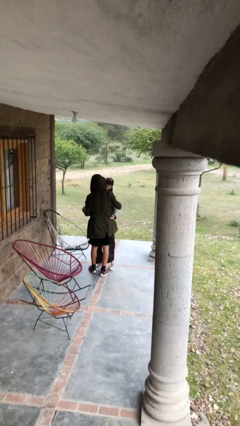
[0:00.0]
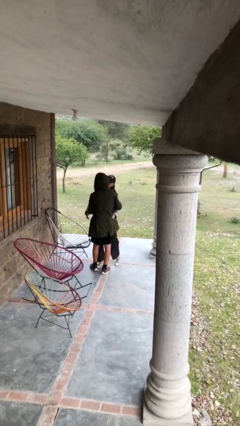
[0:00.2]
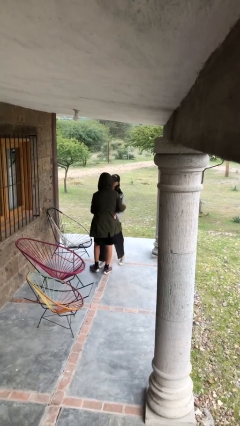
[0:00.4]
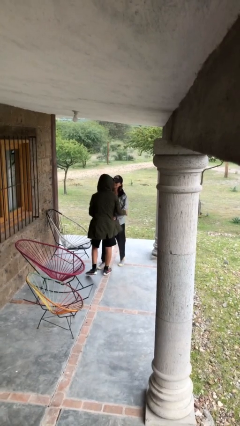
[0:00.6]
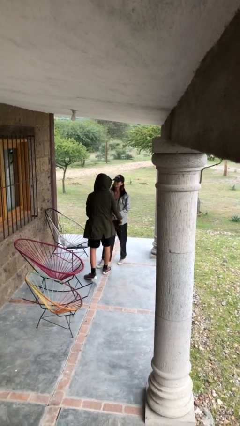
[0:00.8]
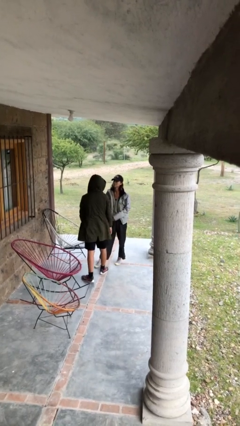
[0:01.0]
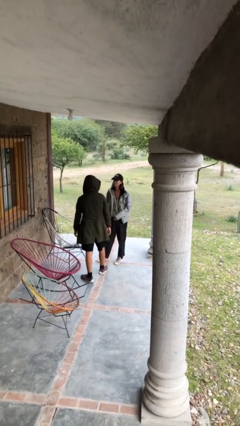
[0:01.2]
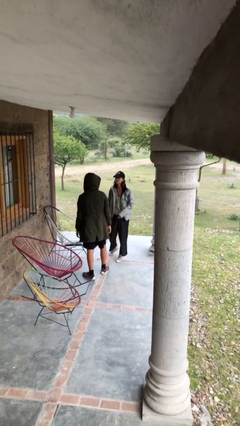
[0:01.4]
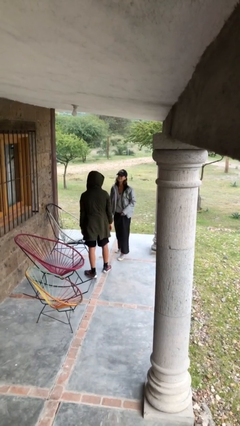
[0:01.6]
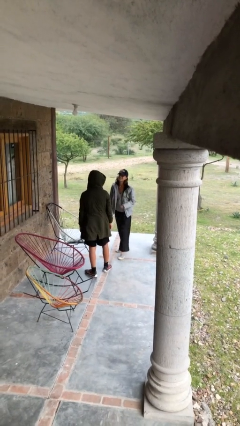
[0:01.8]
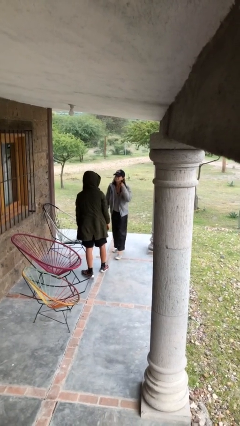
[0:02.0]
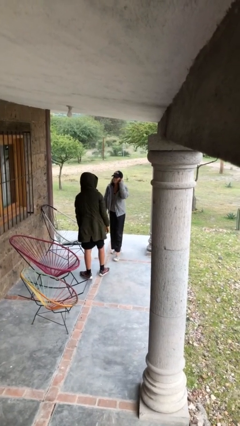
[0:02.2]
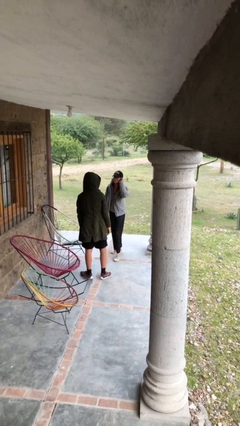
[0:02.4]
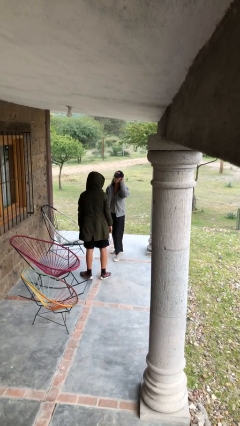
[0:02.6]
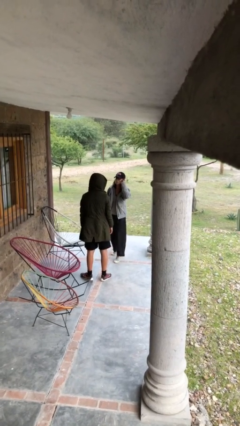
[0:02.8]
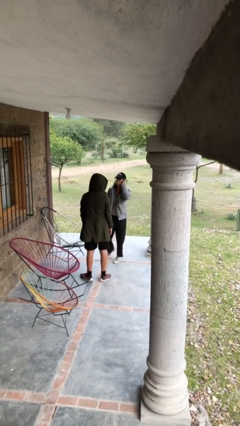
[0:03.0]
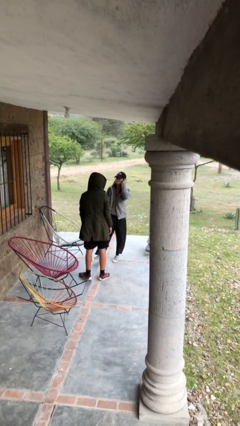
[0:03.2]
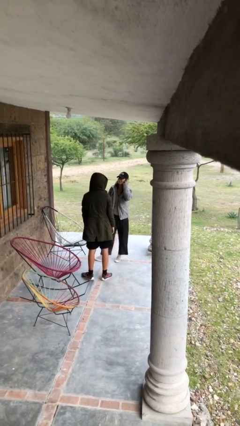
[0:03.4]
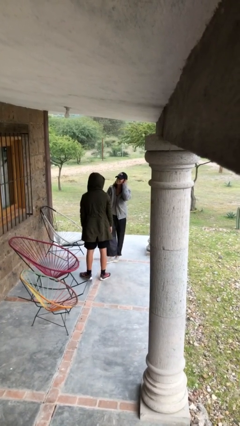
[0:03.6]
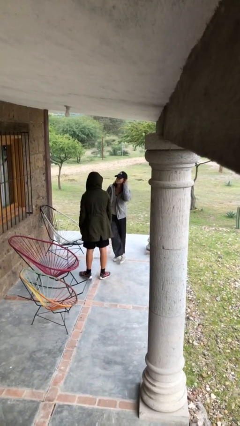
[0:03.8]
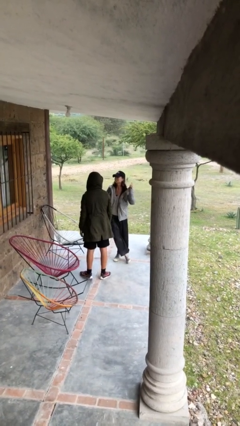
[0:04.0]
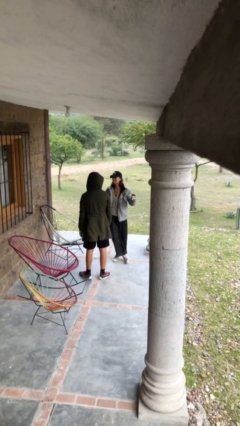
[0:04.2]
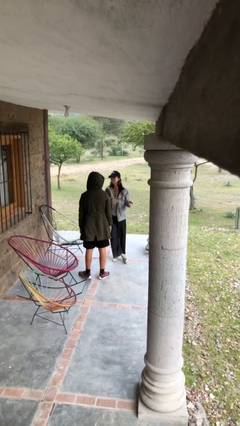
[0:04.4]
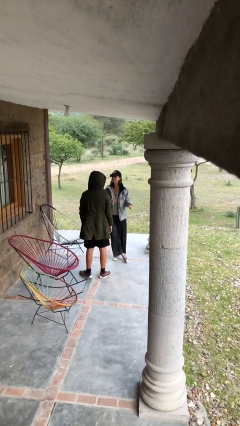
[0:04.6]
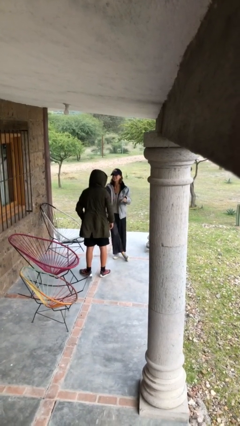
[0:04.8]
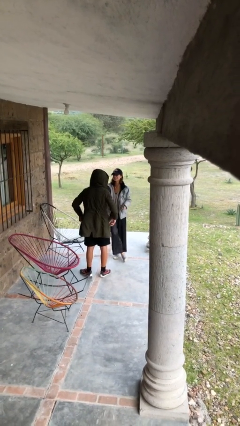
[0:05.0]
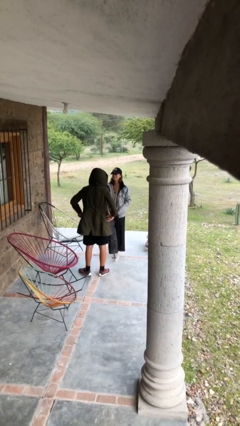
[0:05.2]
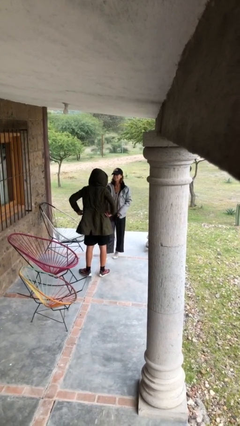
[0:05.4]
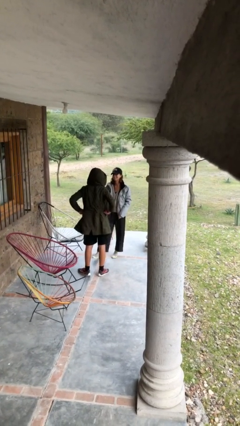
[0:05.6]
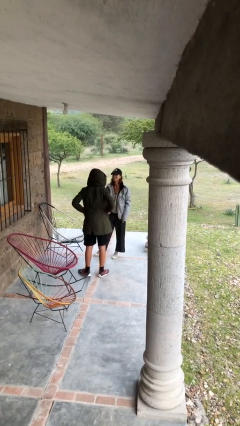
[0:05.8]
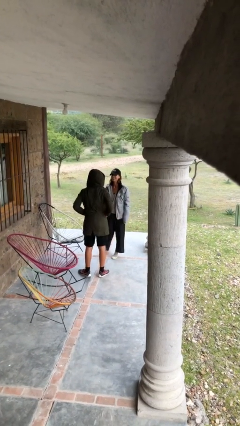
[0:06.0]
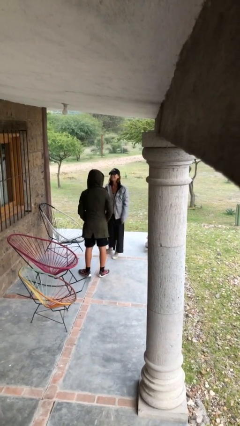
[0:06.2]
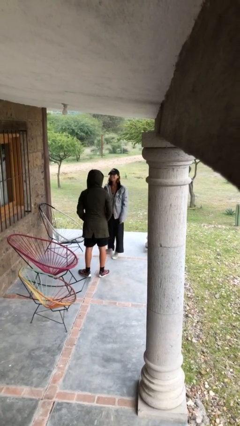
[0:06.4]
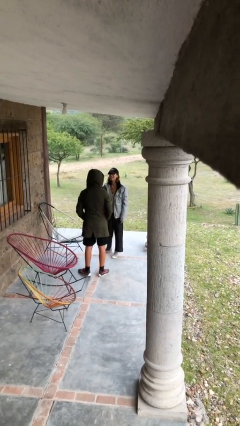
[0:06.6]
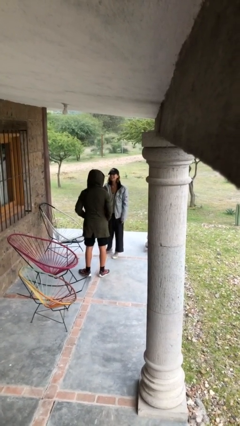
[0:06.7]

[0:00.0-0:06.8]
person talks to person

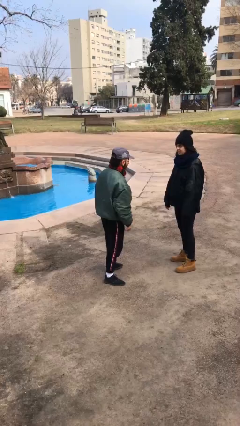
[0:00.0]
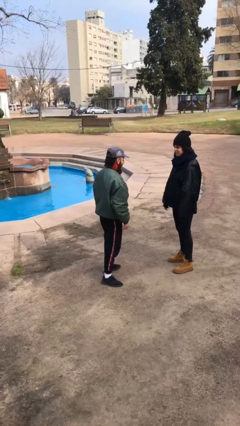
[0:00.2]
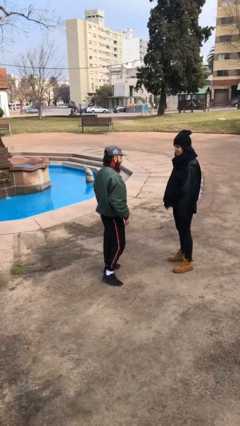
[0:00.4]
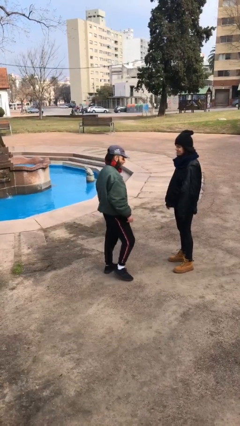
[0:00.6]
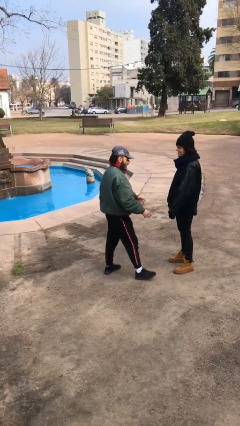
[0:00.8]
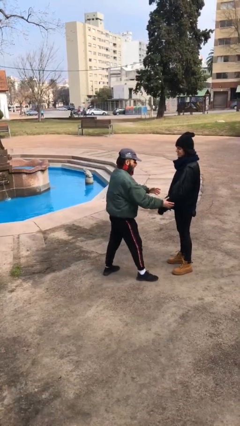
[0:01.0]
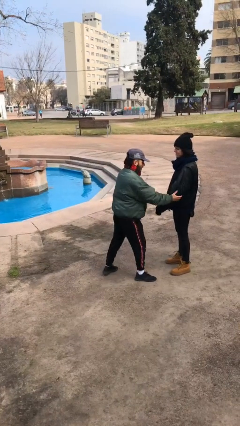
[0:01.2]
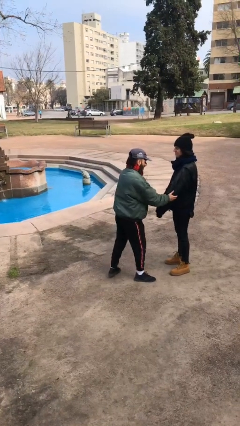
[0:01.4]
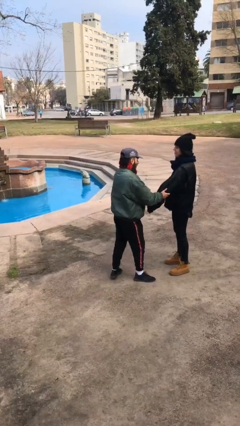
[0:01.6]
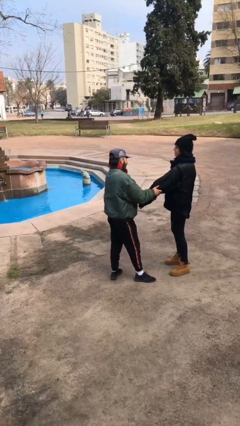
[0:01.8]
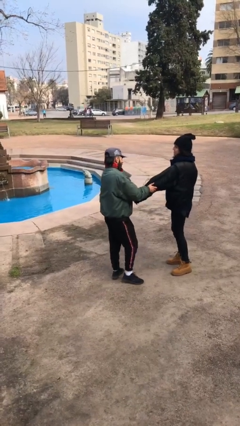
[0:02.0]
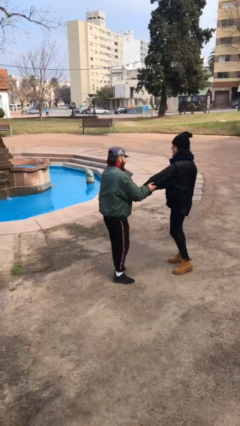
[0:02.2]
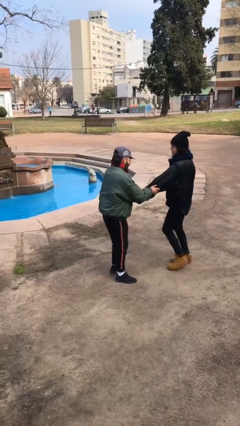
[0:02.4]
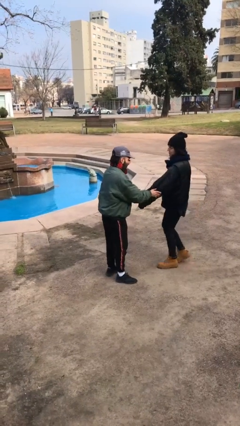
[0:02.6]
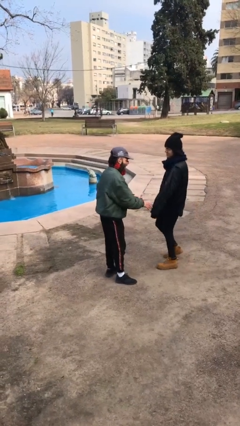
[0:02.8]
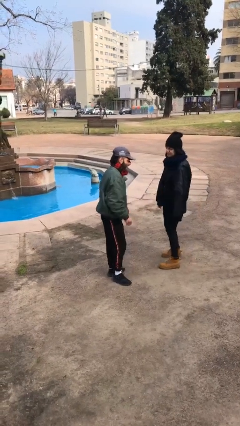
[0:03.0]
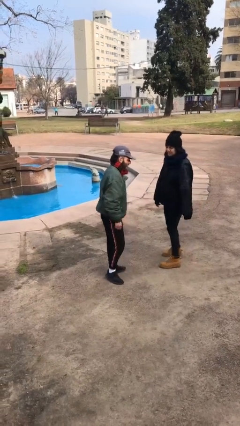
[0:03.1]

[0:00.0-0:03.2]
person grabs person by forearm

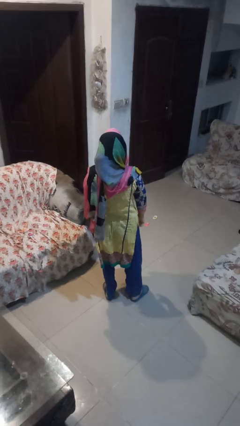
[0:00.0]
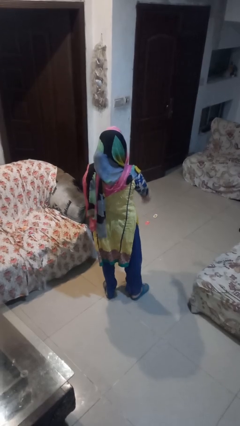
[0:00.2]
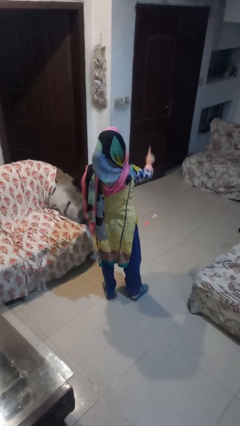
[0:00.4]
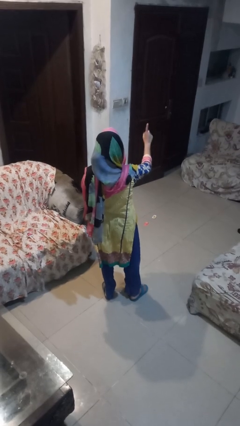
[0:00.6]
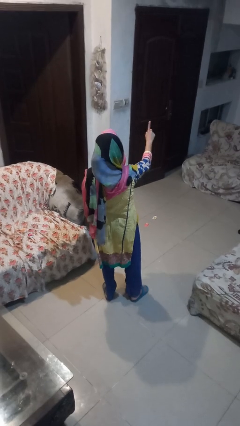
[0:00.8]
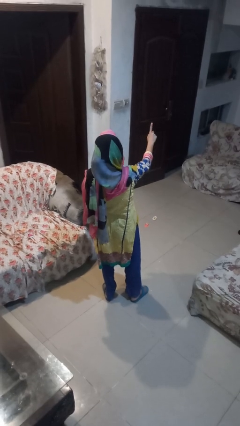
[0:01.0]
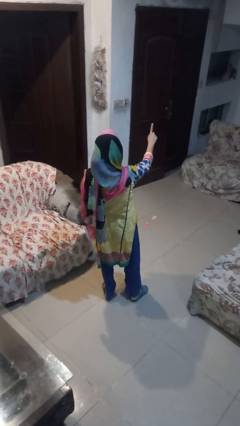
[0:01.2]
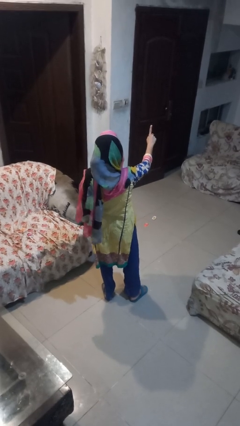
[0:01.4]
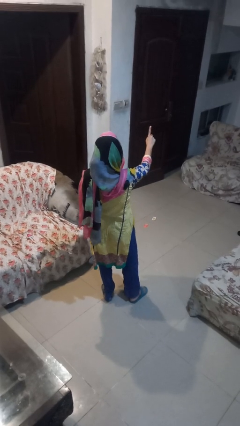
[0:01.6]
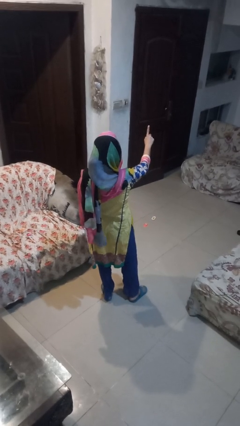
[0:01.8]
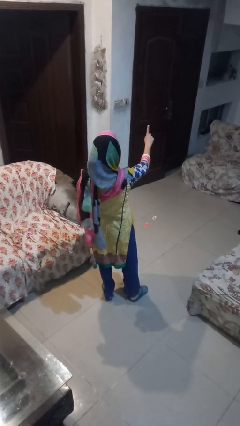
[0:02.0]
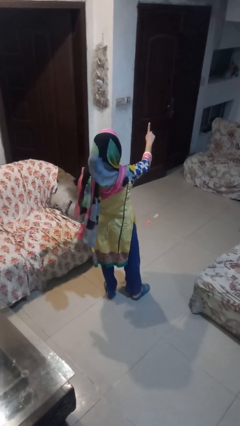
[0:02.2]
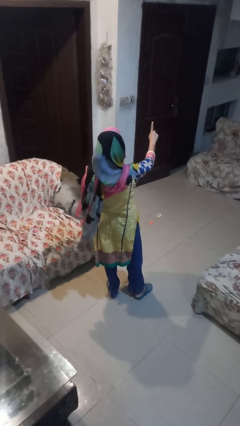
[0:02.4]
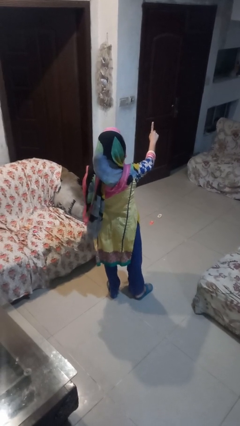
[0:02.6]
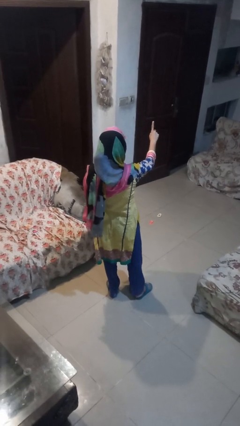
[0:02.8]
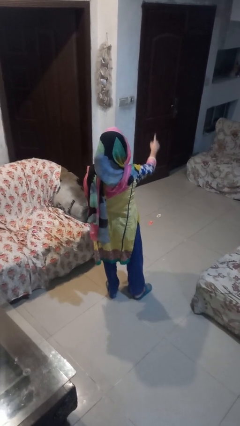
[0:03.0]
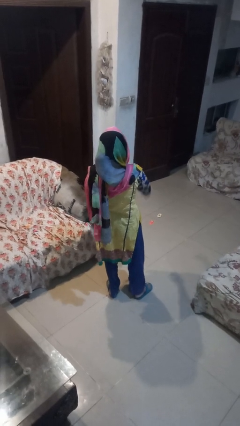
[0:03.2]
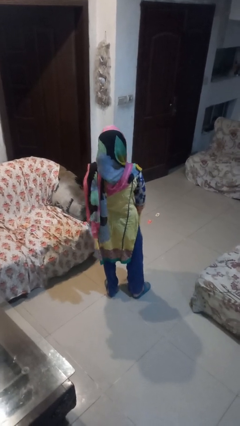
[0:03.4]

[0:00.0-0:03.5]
person gestures number one

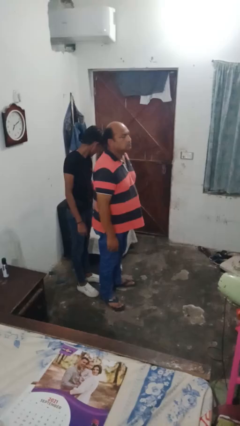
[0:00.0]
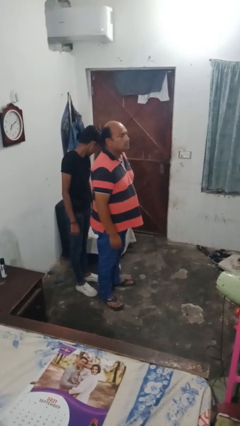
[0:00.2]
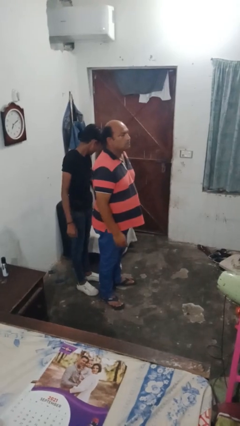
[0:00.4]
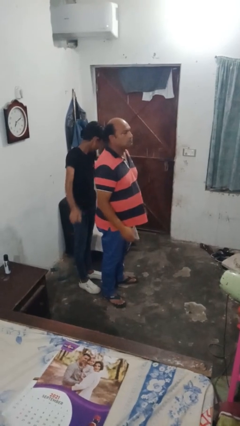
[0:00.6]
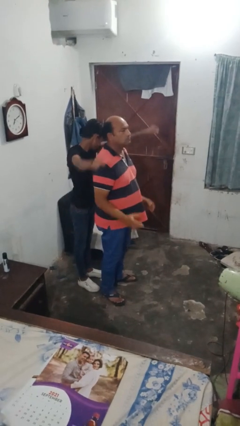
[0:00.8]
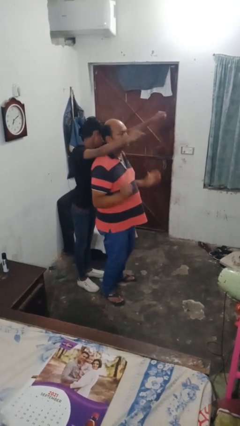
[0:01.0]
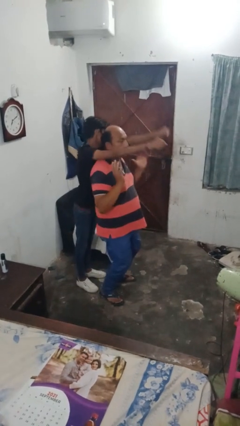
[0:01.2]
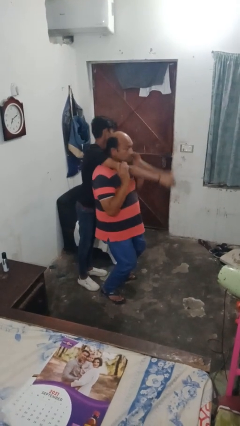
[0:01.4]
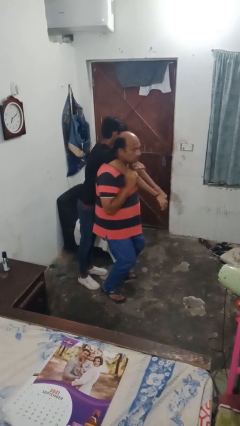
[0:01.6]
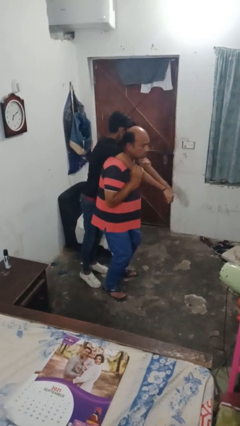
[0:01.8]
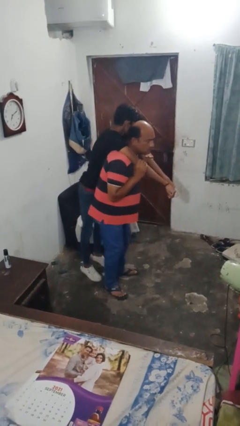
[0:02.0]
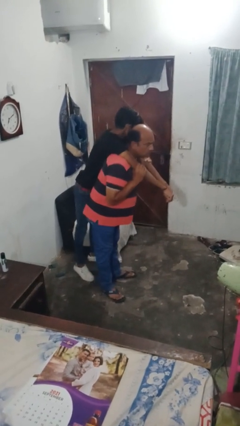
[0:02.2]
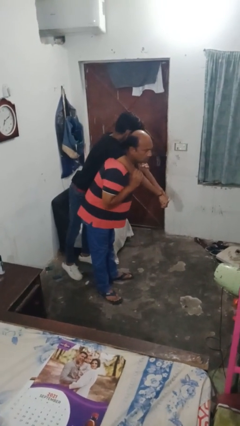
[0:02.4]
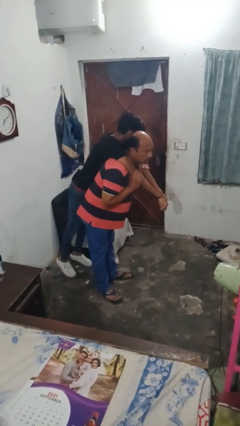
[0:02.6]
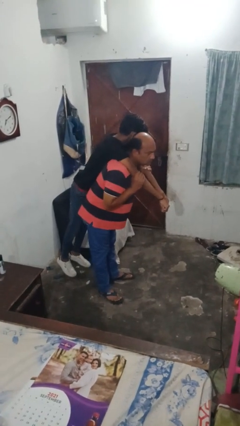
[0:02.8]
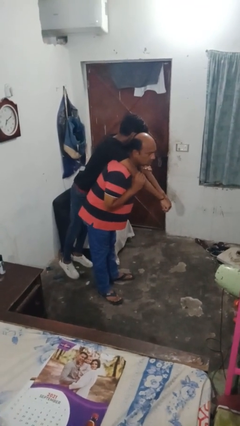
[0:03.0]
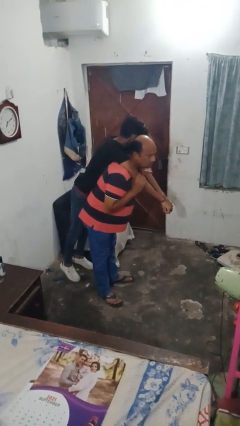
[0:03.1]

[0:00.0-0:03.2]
person carries person on shoulders

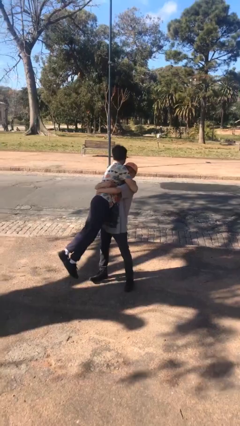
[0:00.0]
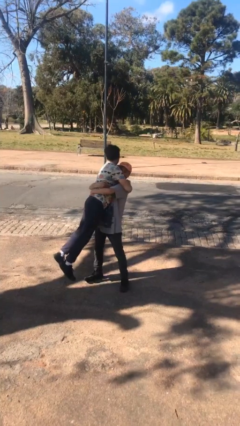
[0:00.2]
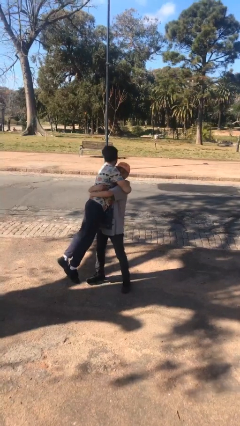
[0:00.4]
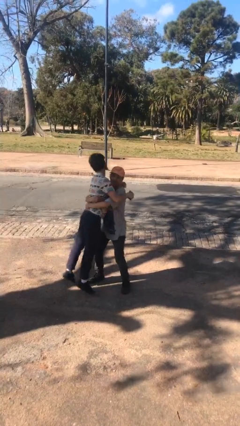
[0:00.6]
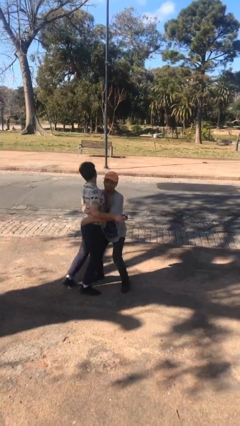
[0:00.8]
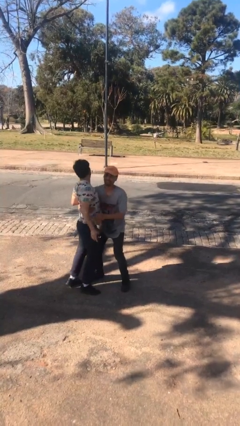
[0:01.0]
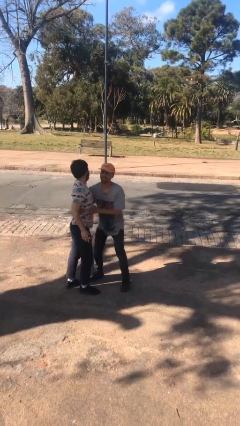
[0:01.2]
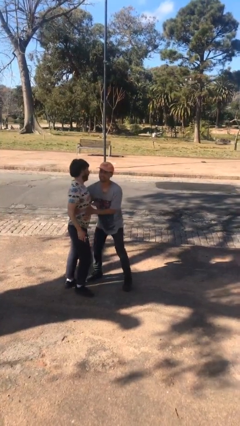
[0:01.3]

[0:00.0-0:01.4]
person puts down person

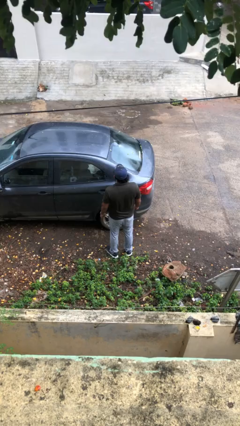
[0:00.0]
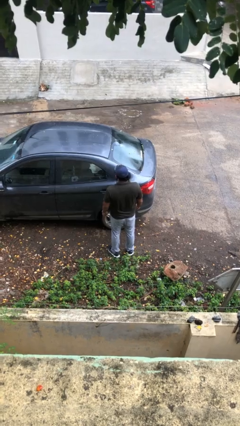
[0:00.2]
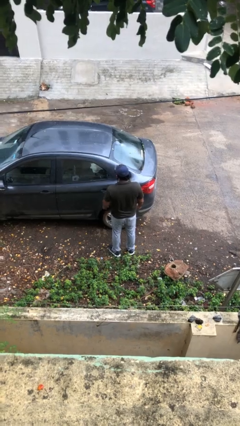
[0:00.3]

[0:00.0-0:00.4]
person opens car door
